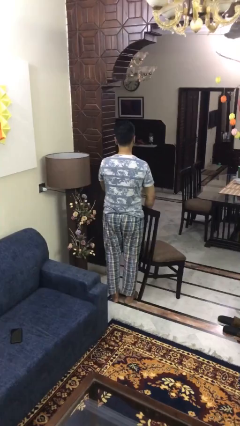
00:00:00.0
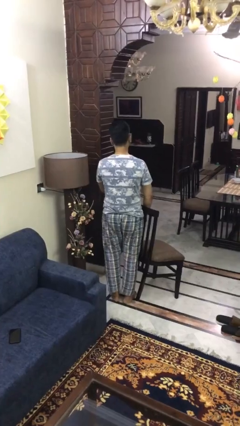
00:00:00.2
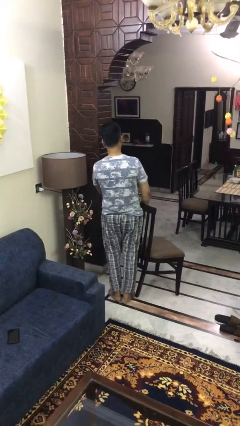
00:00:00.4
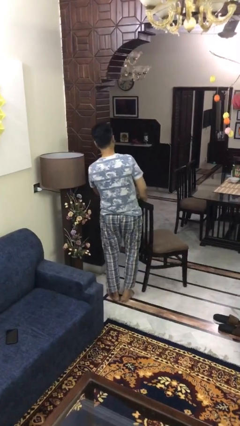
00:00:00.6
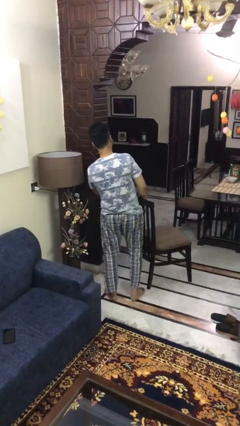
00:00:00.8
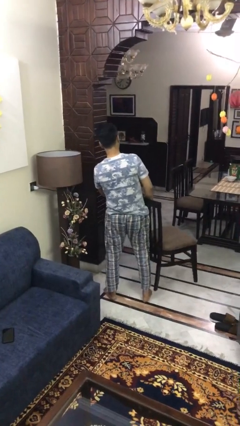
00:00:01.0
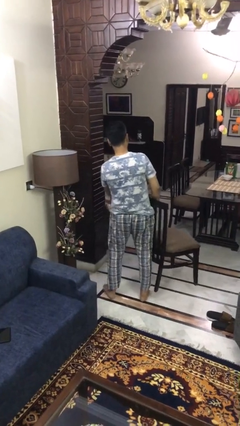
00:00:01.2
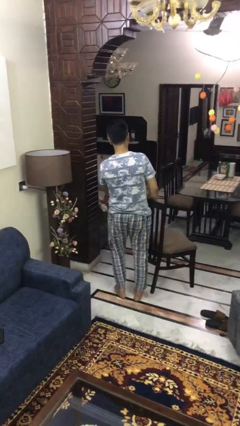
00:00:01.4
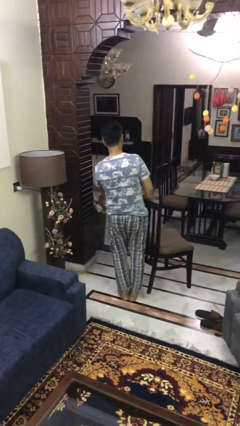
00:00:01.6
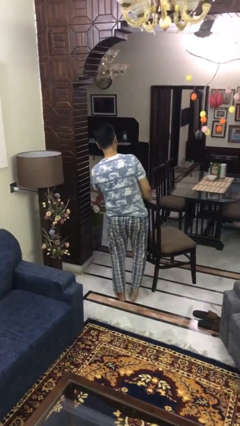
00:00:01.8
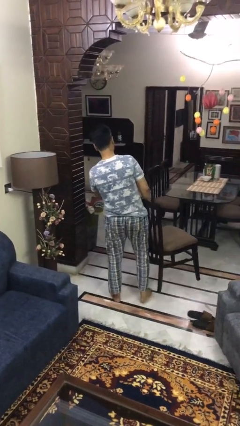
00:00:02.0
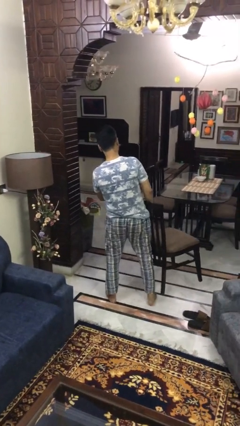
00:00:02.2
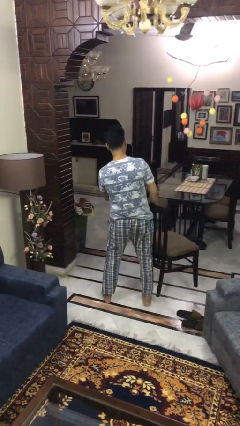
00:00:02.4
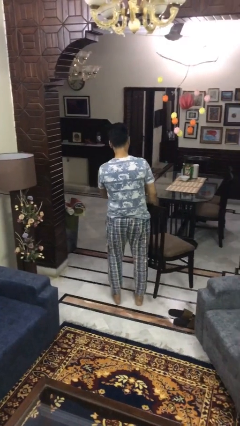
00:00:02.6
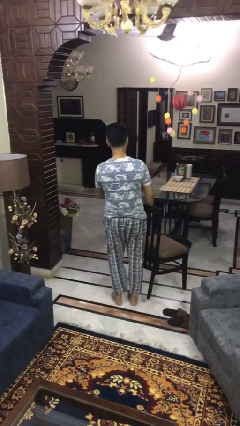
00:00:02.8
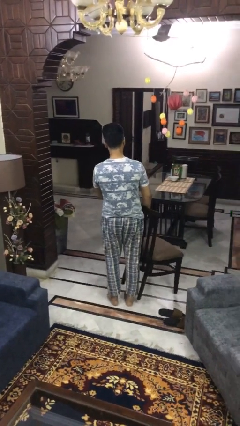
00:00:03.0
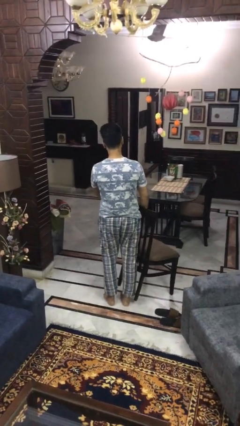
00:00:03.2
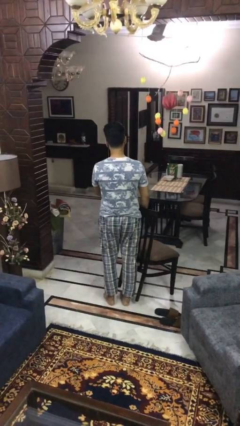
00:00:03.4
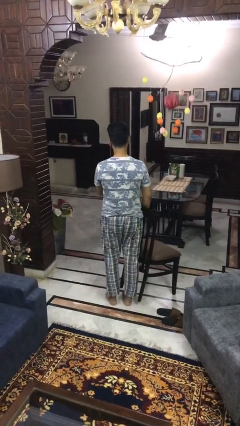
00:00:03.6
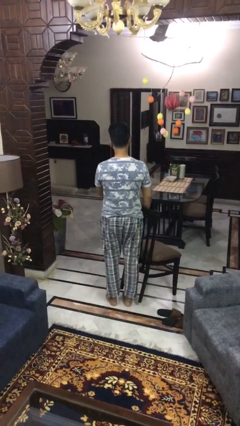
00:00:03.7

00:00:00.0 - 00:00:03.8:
person carries furniture

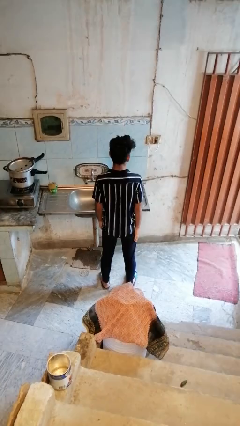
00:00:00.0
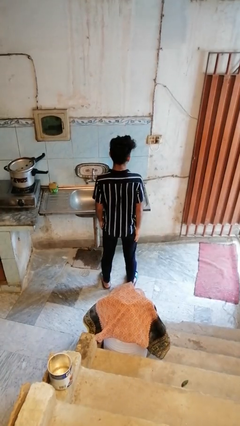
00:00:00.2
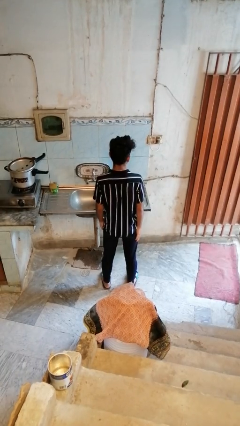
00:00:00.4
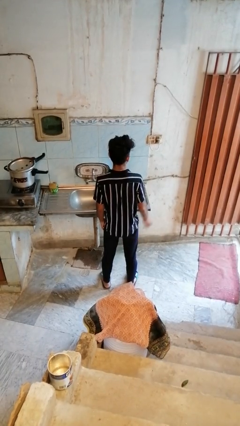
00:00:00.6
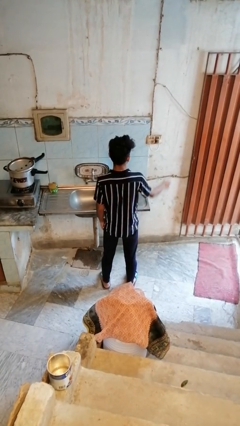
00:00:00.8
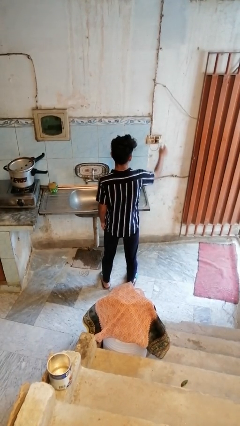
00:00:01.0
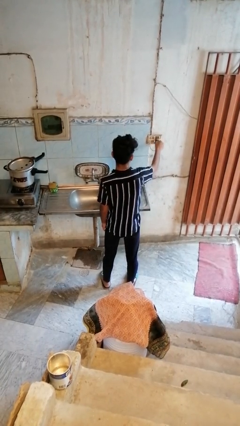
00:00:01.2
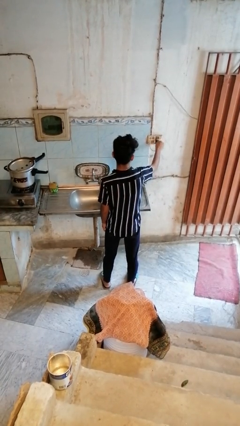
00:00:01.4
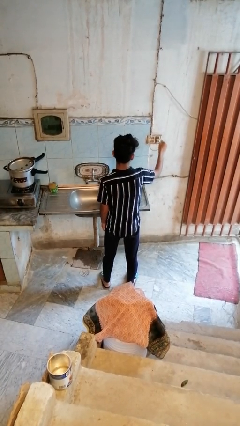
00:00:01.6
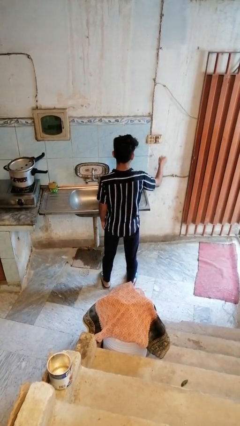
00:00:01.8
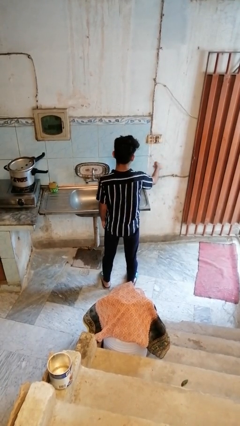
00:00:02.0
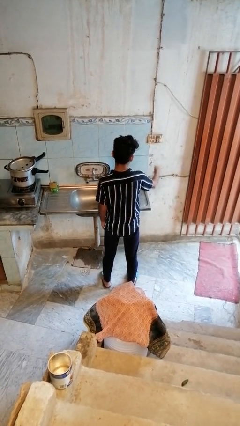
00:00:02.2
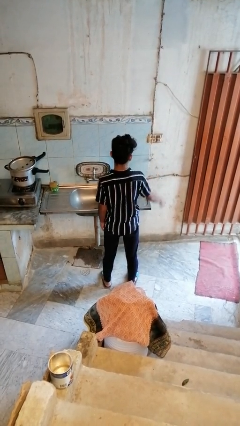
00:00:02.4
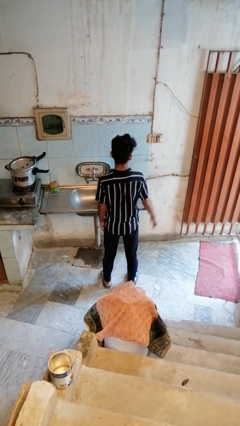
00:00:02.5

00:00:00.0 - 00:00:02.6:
person unplugs from electrical socket

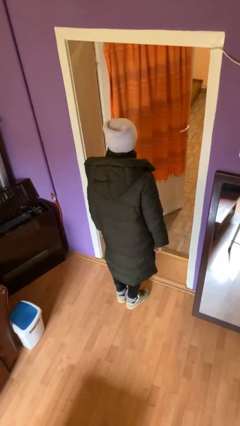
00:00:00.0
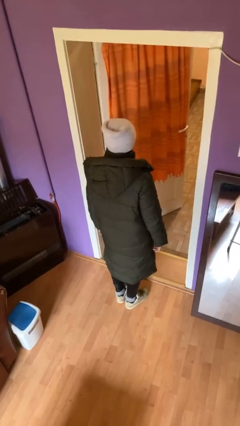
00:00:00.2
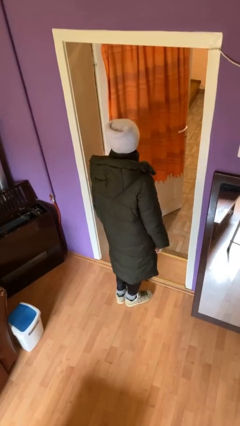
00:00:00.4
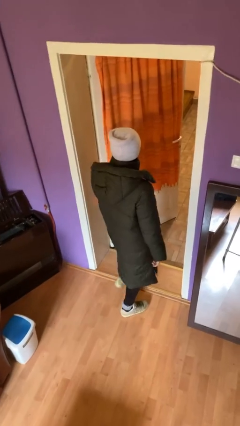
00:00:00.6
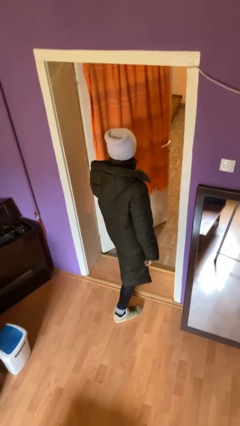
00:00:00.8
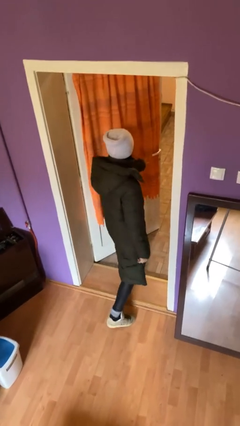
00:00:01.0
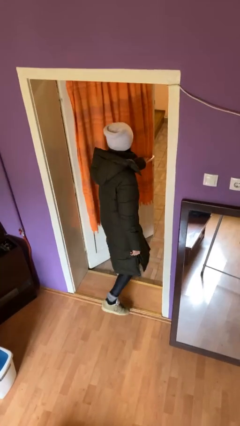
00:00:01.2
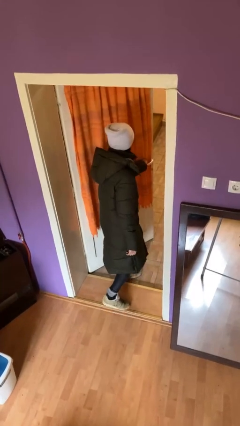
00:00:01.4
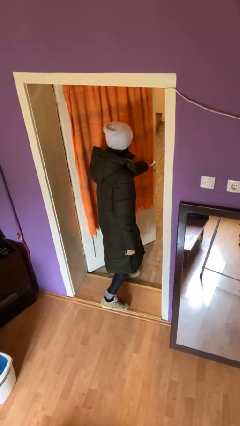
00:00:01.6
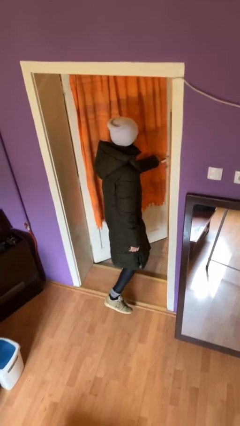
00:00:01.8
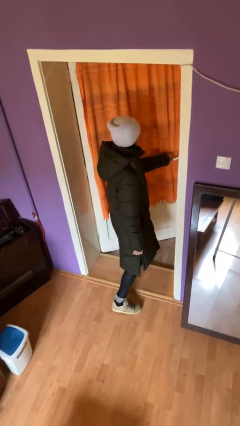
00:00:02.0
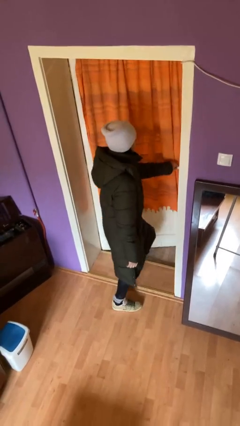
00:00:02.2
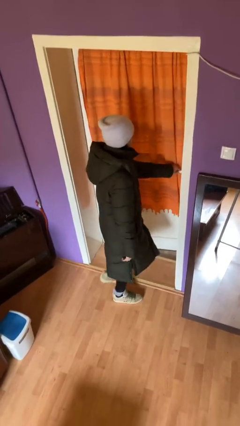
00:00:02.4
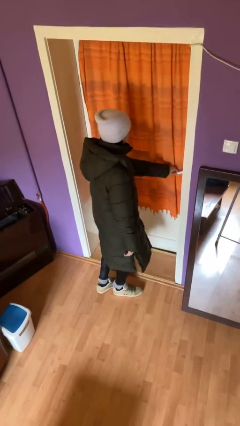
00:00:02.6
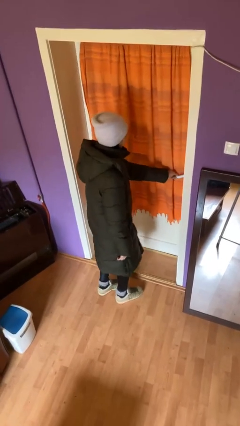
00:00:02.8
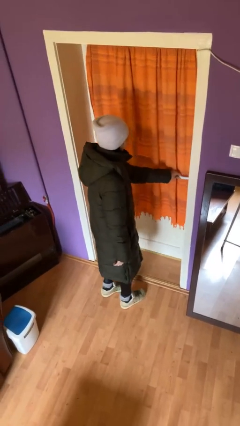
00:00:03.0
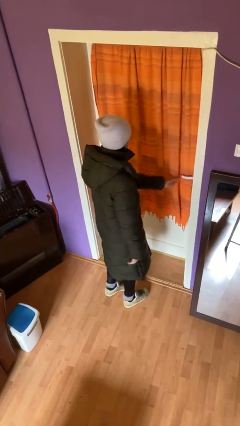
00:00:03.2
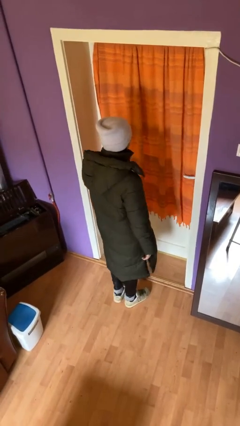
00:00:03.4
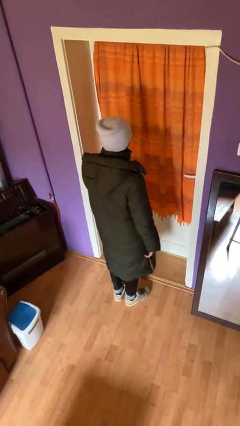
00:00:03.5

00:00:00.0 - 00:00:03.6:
person closes facility door

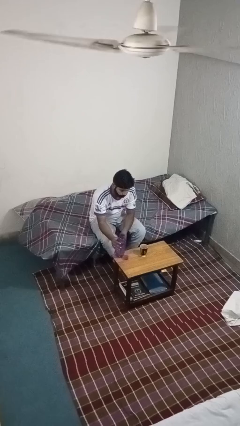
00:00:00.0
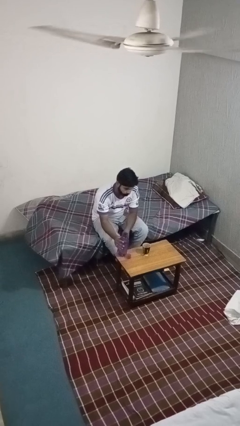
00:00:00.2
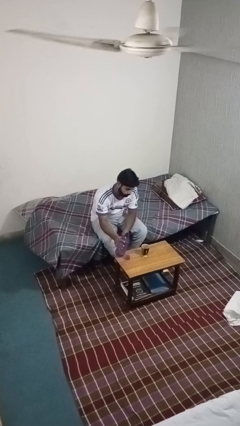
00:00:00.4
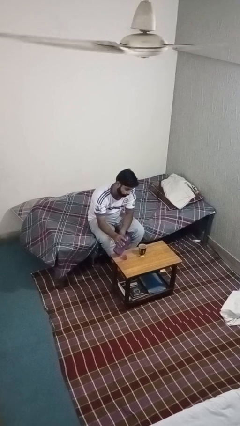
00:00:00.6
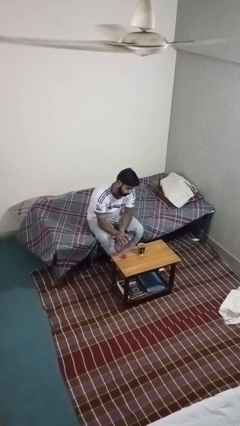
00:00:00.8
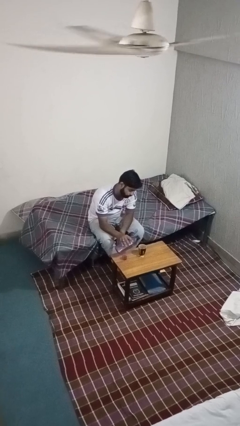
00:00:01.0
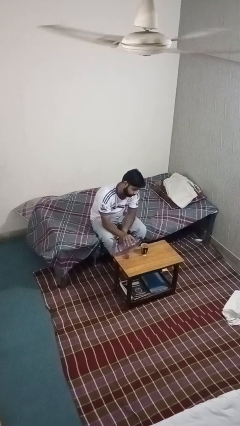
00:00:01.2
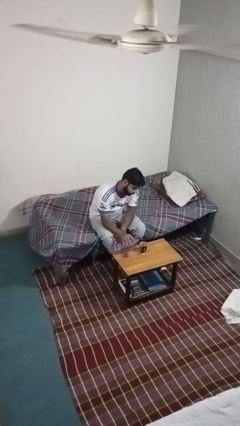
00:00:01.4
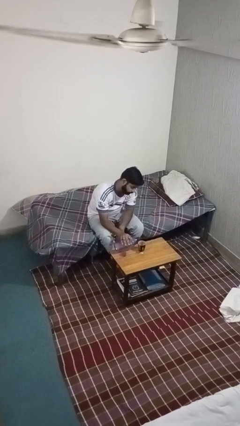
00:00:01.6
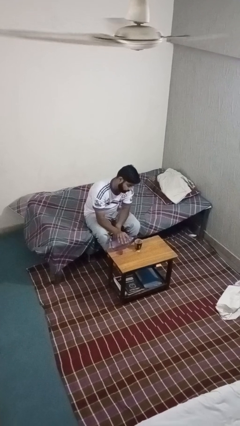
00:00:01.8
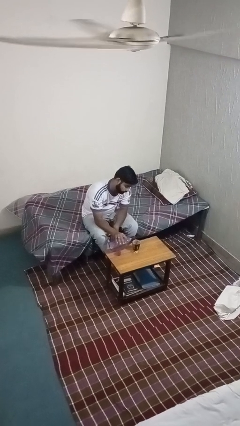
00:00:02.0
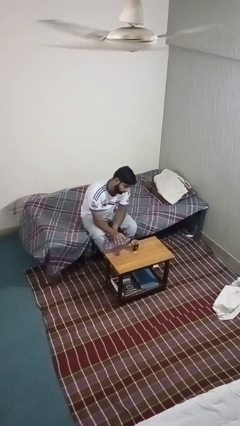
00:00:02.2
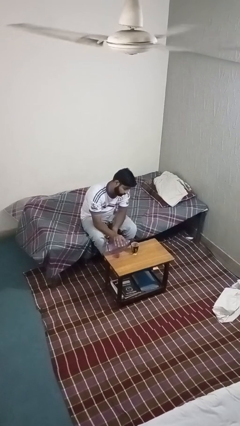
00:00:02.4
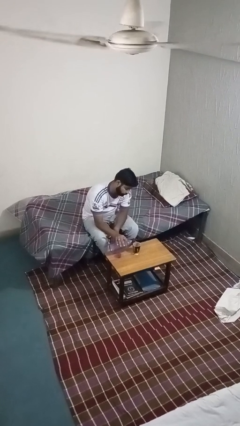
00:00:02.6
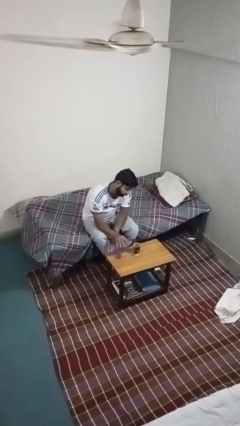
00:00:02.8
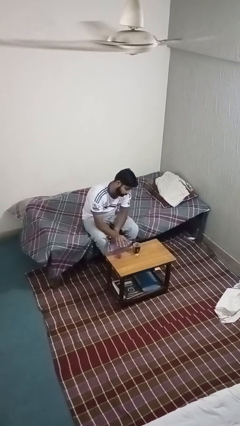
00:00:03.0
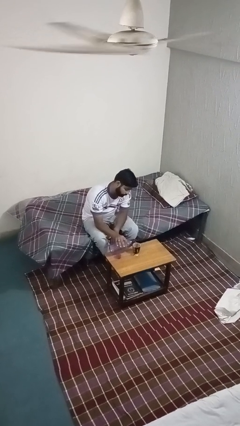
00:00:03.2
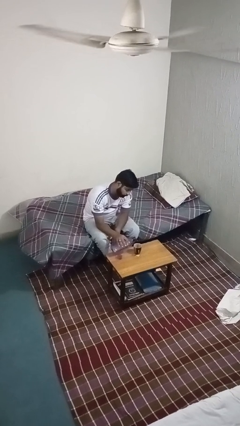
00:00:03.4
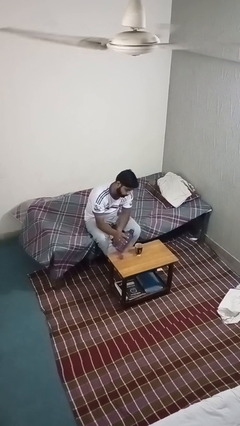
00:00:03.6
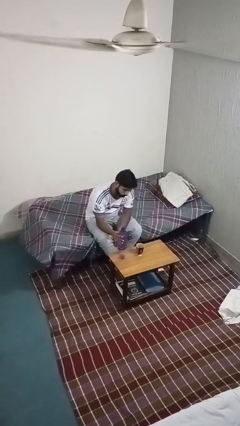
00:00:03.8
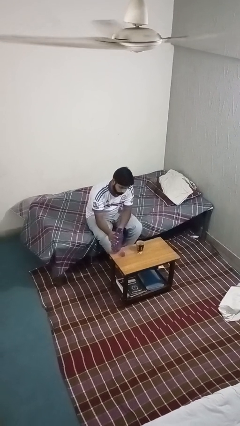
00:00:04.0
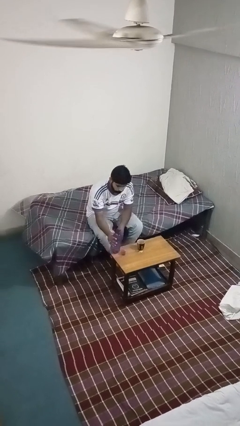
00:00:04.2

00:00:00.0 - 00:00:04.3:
person pours liquid into cup

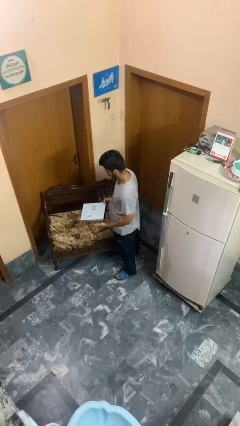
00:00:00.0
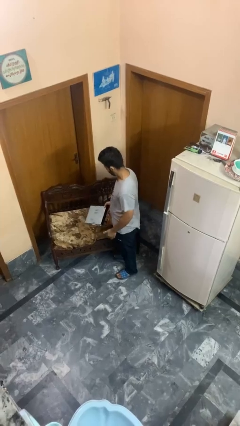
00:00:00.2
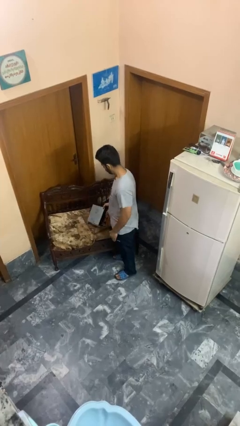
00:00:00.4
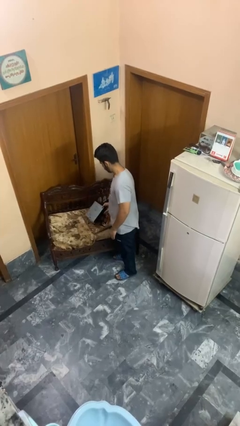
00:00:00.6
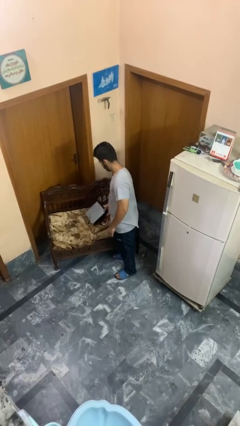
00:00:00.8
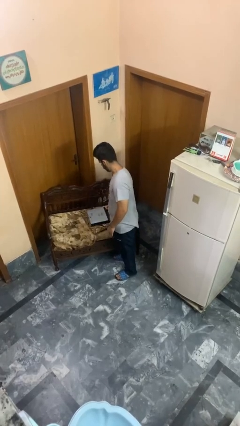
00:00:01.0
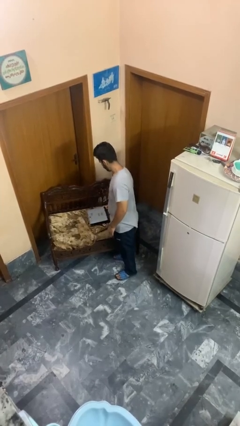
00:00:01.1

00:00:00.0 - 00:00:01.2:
person puts down object on couch

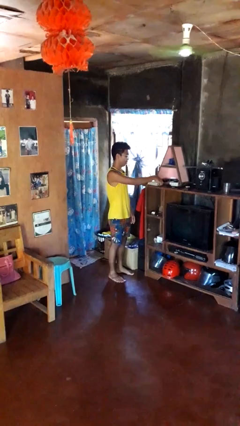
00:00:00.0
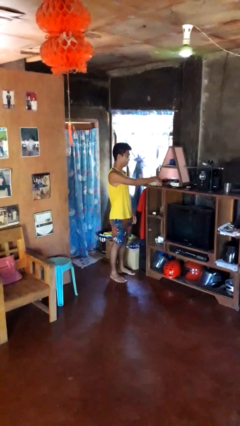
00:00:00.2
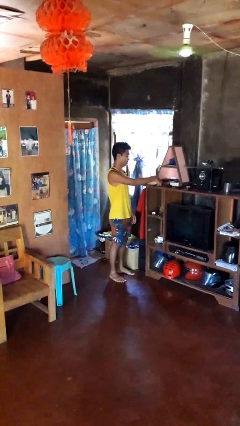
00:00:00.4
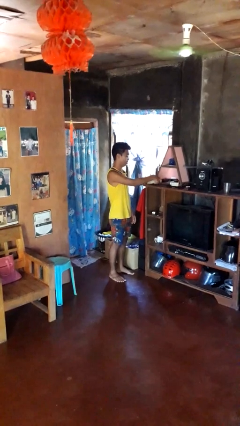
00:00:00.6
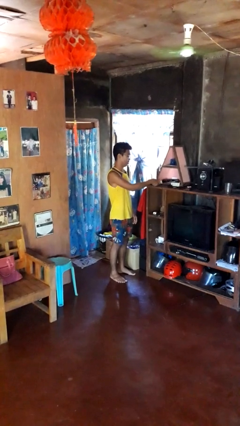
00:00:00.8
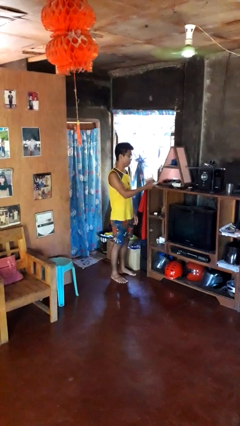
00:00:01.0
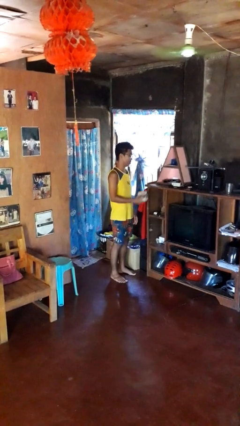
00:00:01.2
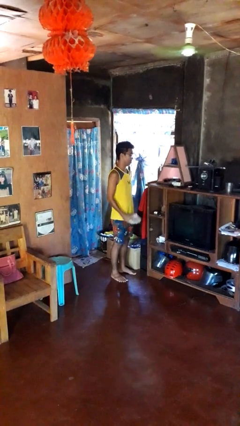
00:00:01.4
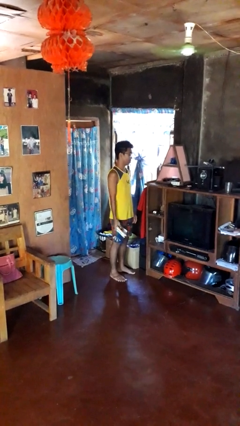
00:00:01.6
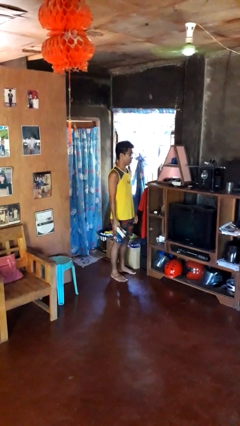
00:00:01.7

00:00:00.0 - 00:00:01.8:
person picks up object from shelf
